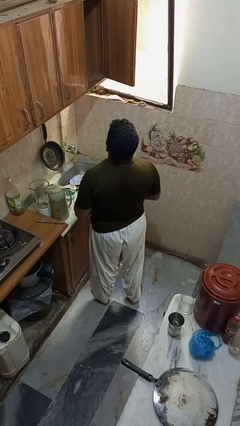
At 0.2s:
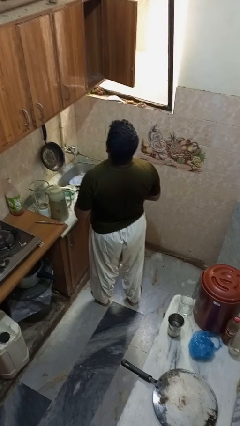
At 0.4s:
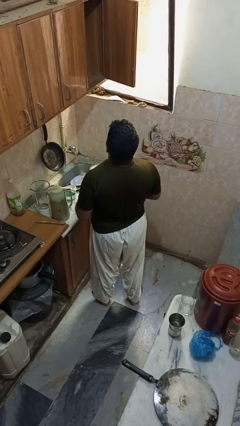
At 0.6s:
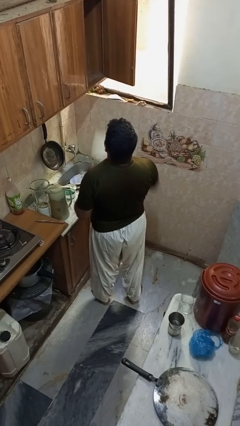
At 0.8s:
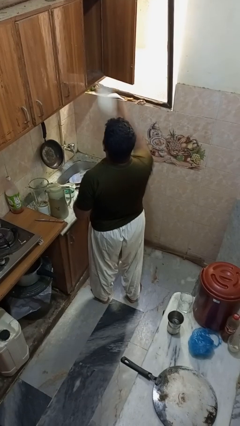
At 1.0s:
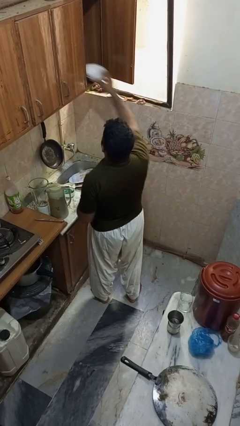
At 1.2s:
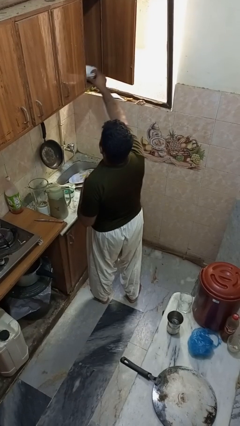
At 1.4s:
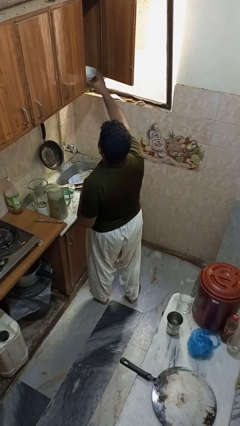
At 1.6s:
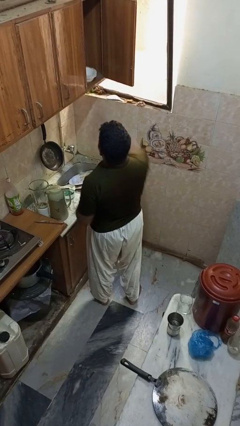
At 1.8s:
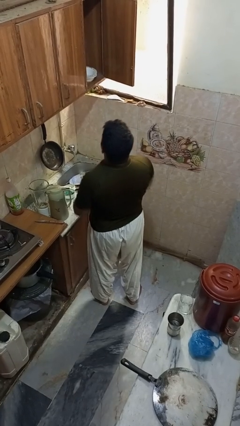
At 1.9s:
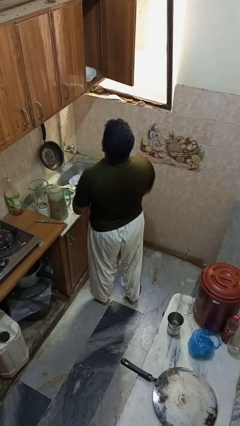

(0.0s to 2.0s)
person puts object in cabinet

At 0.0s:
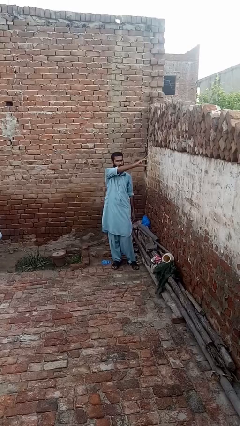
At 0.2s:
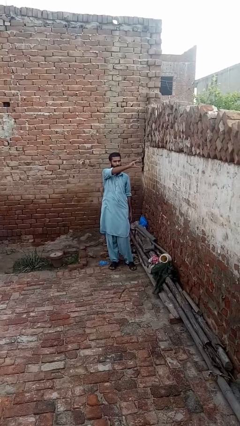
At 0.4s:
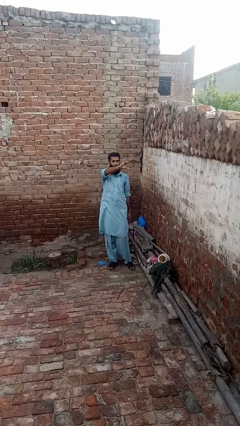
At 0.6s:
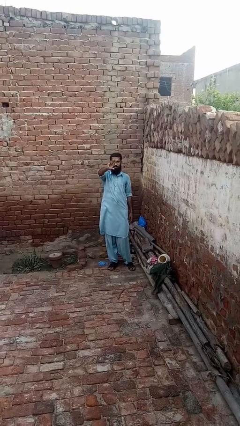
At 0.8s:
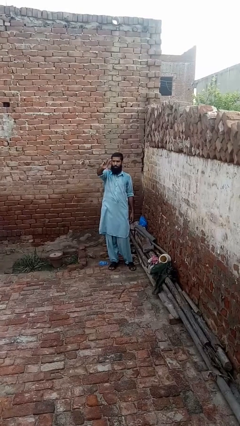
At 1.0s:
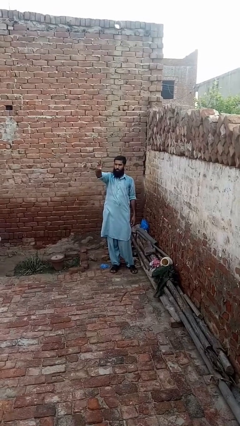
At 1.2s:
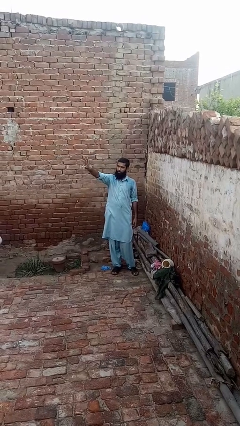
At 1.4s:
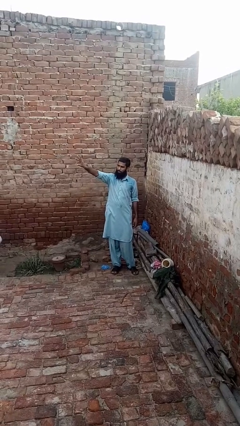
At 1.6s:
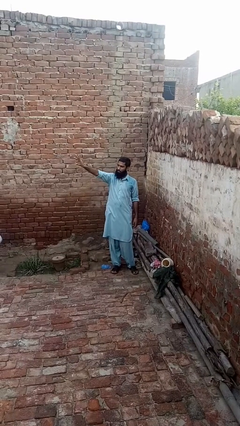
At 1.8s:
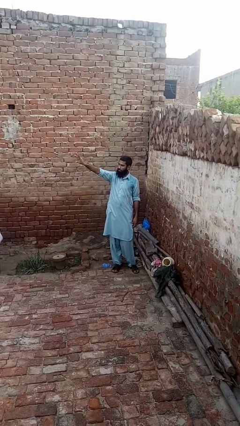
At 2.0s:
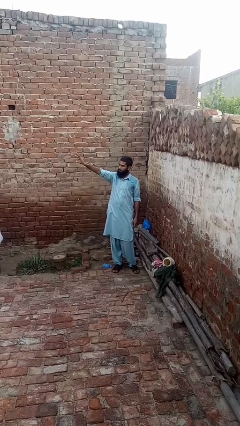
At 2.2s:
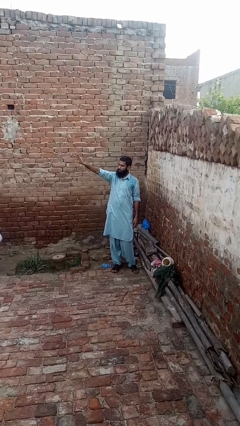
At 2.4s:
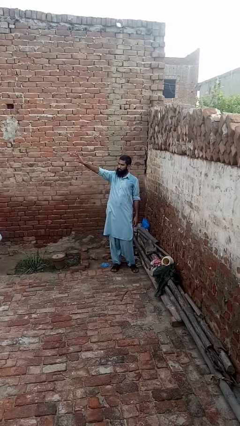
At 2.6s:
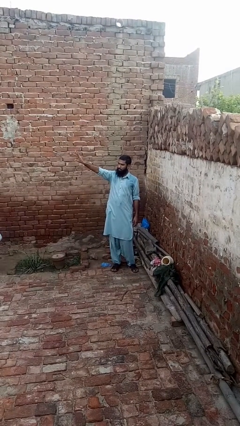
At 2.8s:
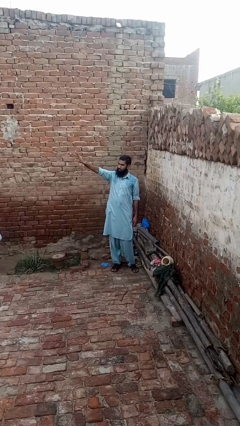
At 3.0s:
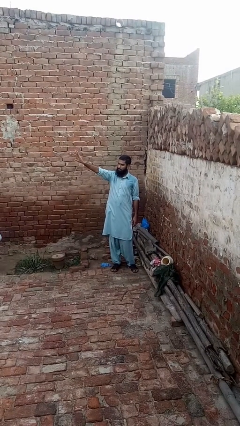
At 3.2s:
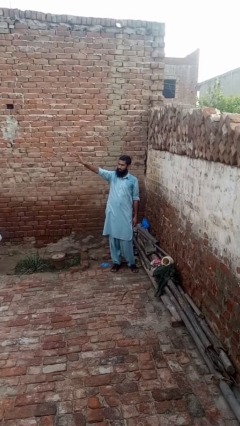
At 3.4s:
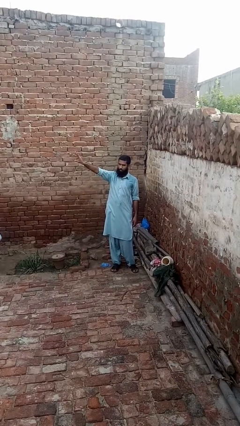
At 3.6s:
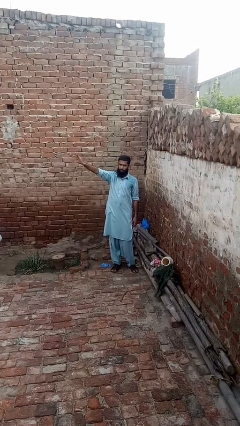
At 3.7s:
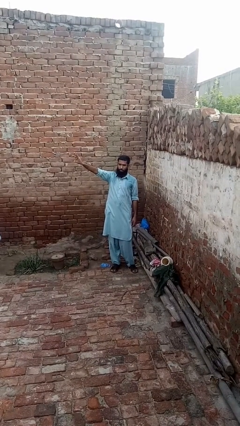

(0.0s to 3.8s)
person gestures swipe right

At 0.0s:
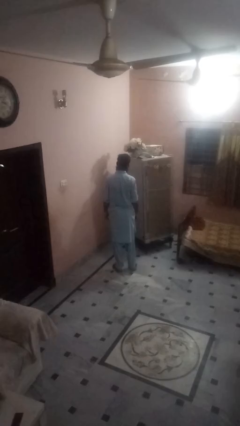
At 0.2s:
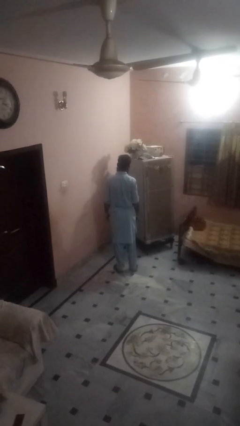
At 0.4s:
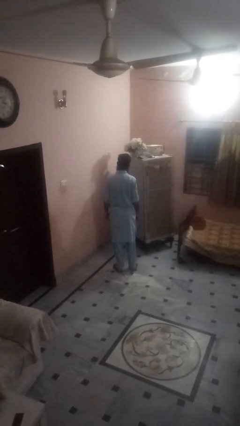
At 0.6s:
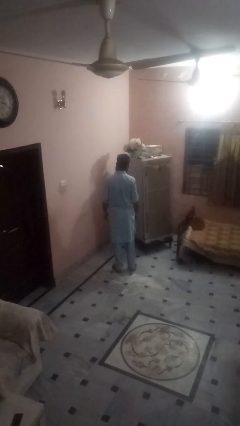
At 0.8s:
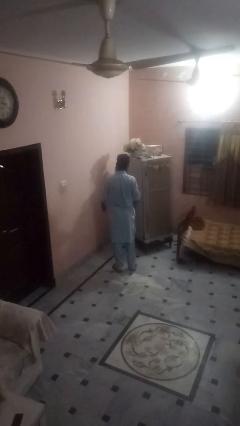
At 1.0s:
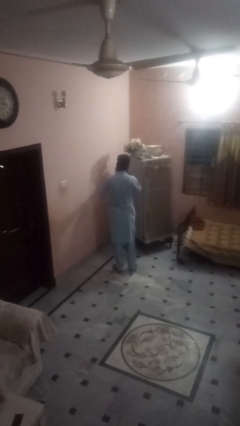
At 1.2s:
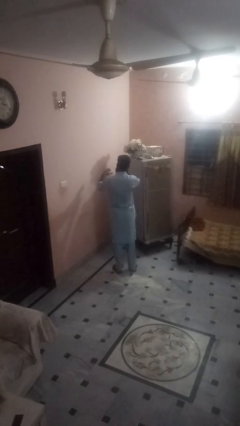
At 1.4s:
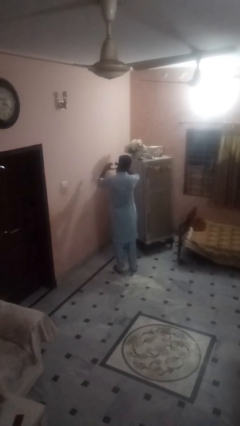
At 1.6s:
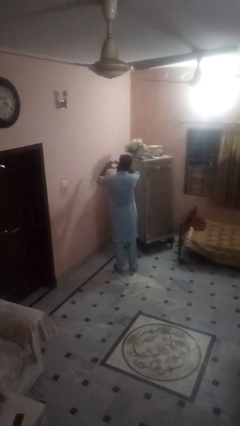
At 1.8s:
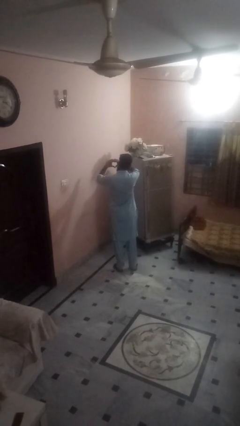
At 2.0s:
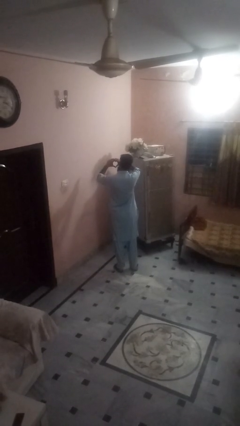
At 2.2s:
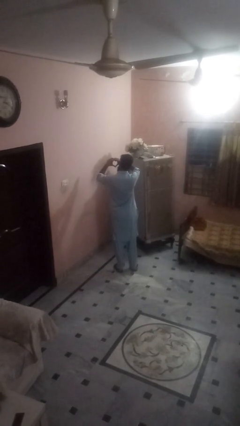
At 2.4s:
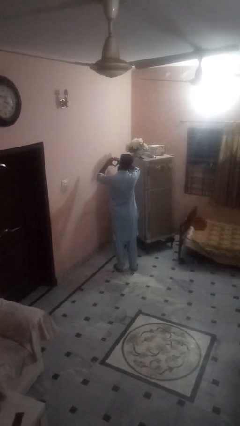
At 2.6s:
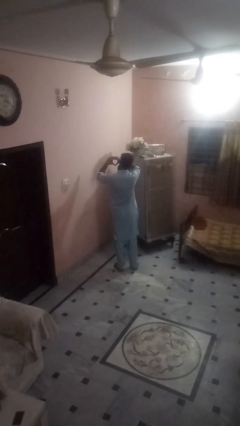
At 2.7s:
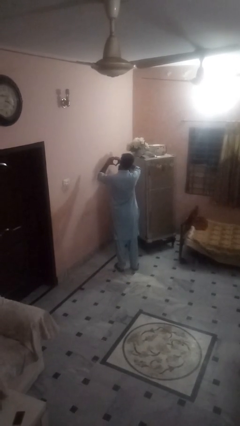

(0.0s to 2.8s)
person gestures heart

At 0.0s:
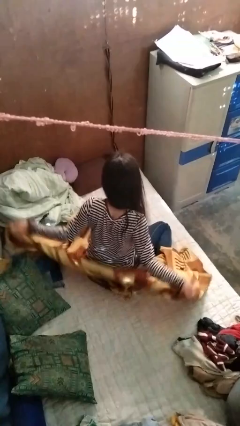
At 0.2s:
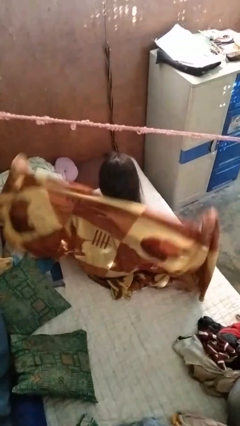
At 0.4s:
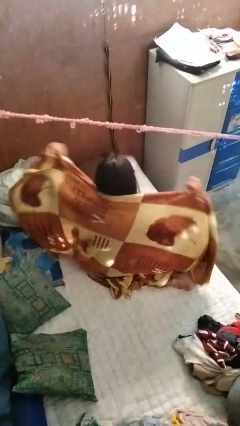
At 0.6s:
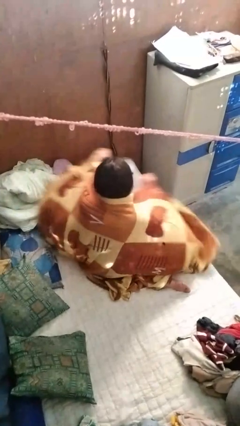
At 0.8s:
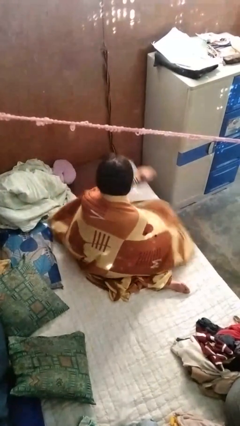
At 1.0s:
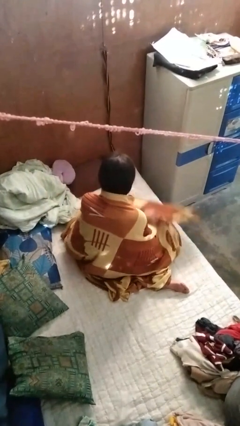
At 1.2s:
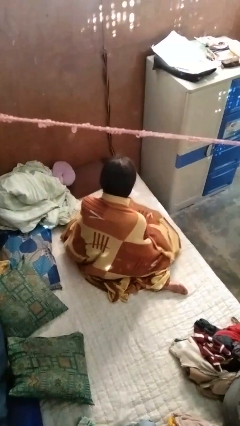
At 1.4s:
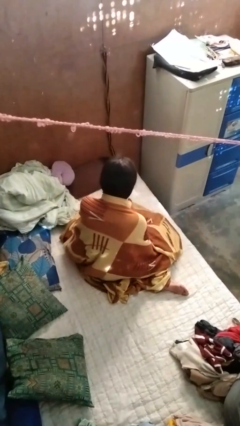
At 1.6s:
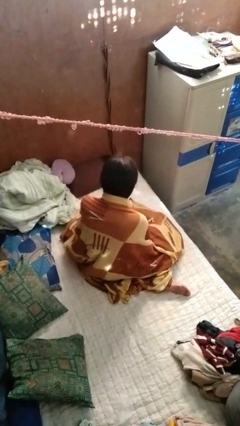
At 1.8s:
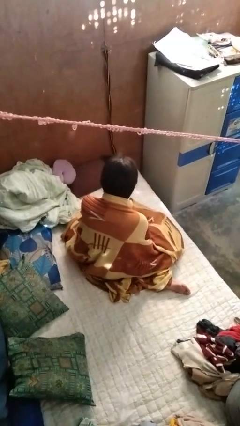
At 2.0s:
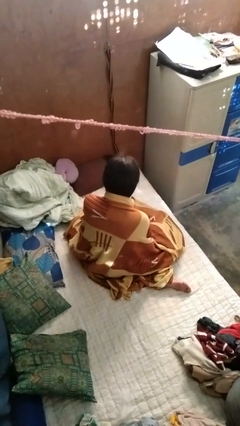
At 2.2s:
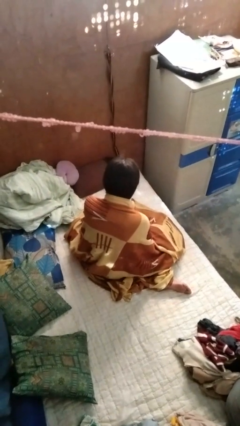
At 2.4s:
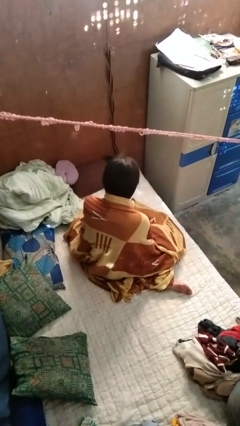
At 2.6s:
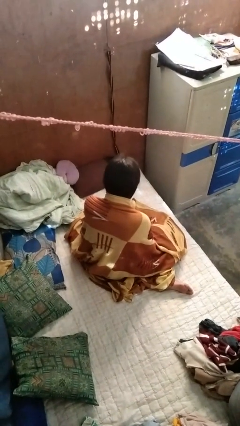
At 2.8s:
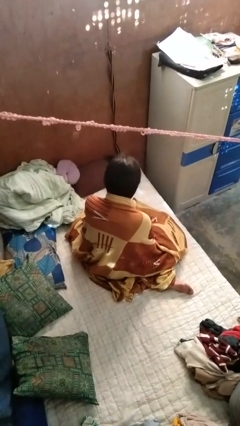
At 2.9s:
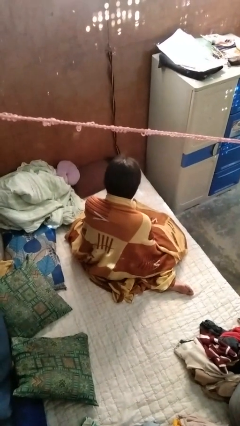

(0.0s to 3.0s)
person covers with blanket

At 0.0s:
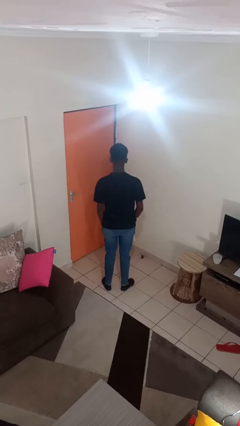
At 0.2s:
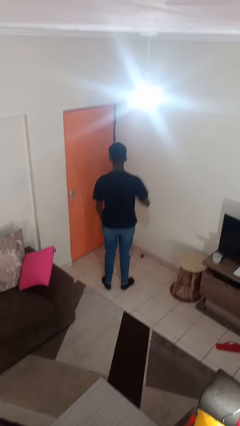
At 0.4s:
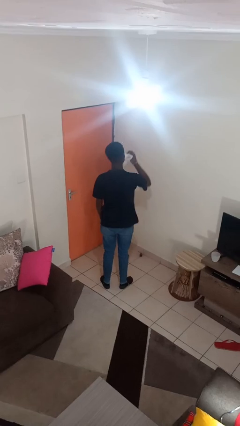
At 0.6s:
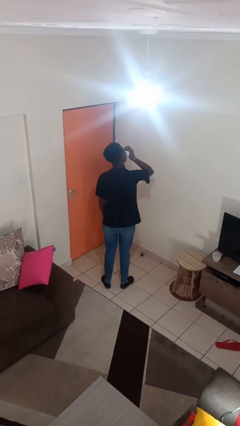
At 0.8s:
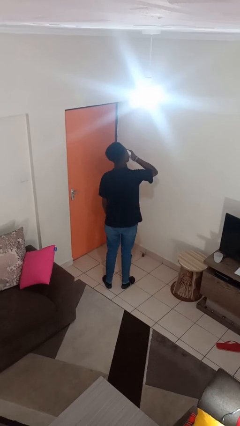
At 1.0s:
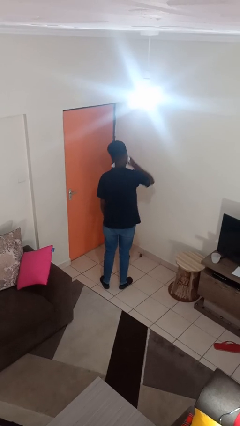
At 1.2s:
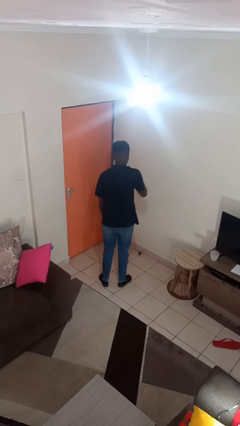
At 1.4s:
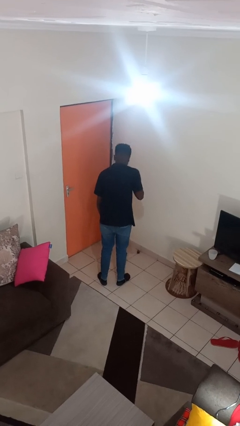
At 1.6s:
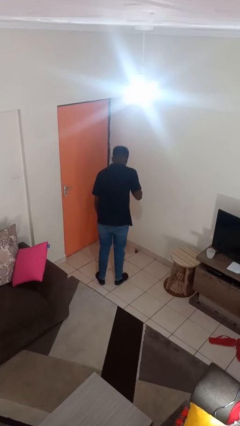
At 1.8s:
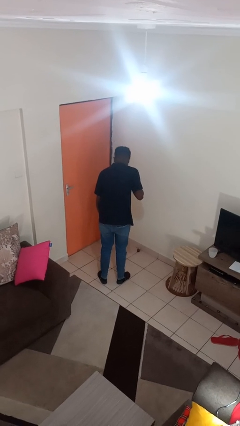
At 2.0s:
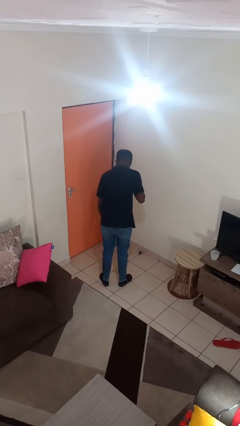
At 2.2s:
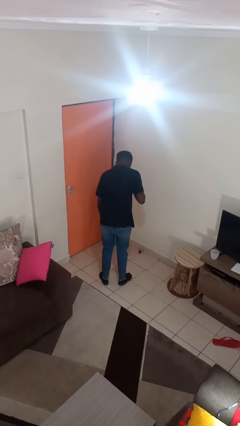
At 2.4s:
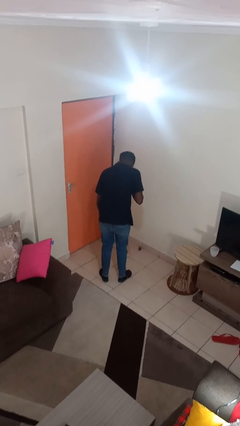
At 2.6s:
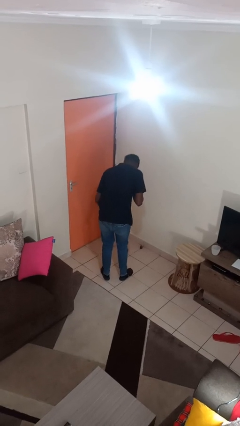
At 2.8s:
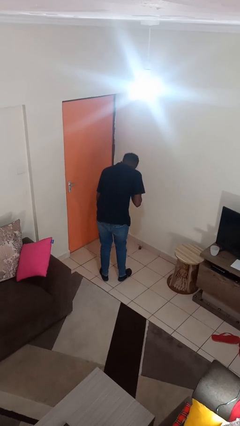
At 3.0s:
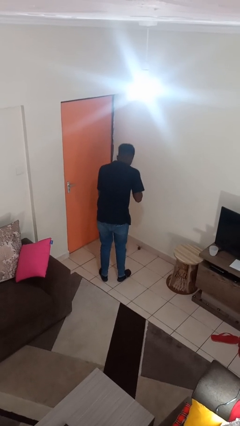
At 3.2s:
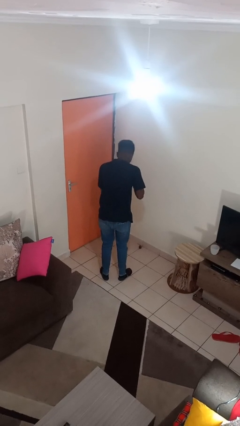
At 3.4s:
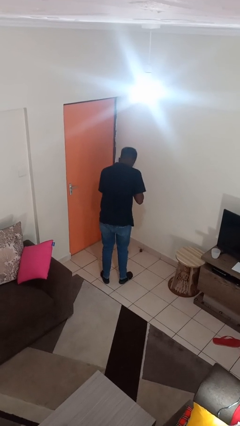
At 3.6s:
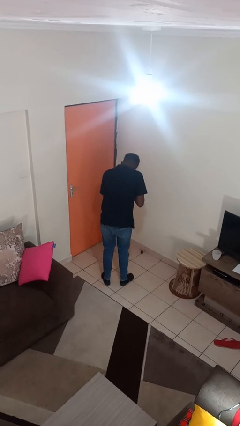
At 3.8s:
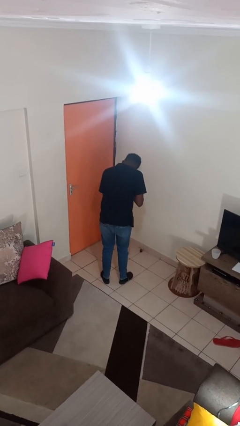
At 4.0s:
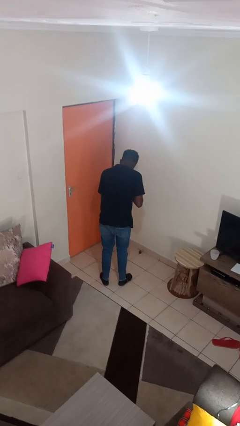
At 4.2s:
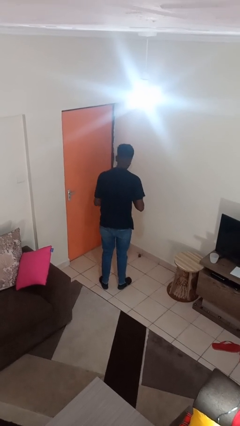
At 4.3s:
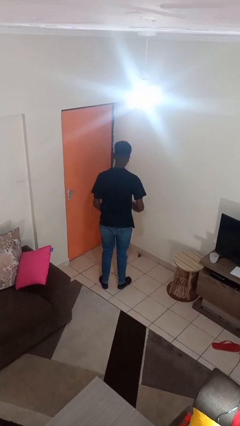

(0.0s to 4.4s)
person blows nose

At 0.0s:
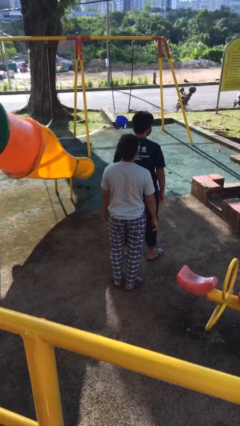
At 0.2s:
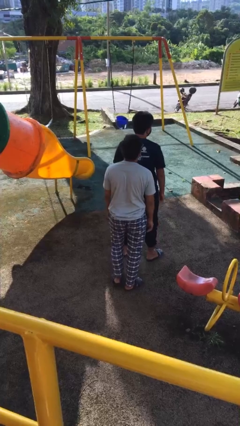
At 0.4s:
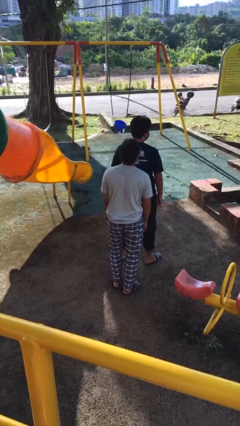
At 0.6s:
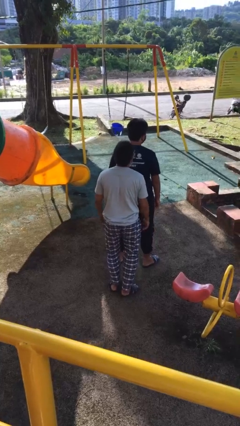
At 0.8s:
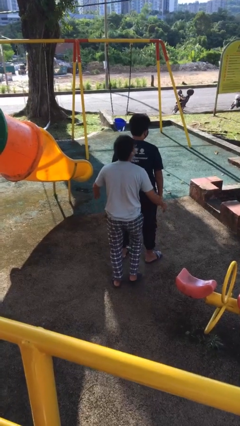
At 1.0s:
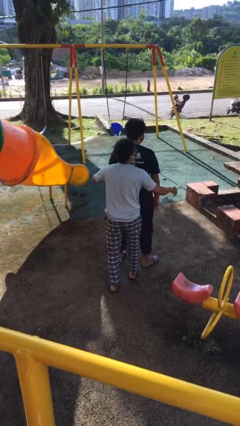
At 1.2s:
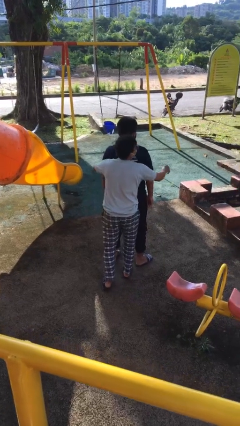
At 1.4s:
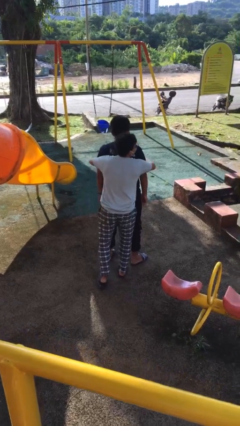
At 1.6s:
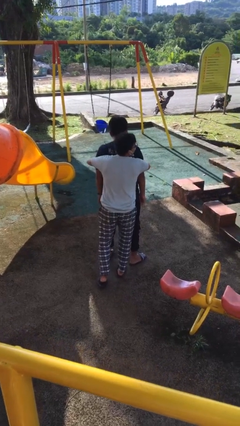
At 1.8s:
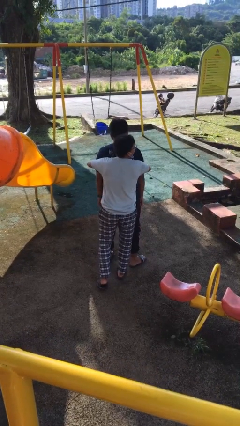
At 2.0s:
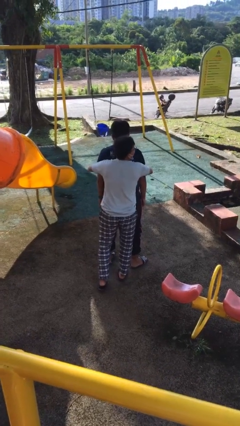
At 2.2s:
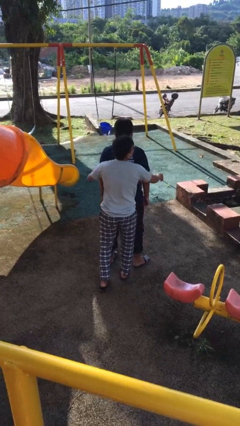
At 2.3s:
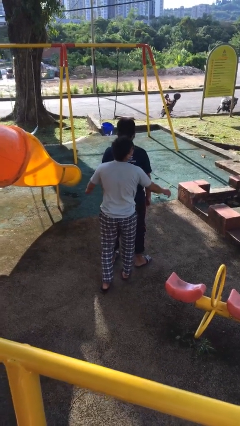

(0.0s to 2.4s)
person hugs person from behind
